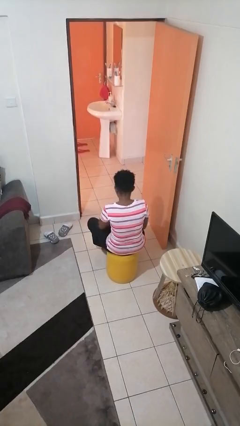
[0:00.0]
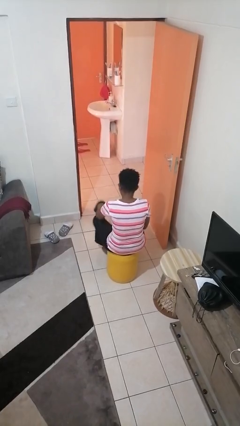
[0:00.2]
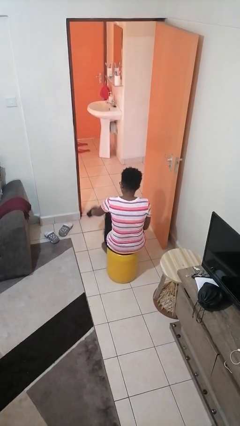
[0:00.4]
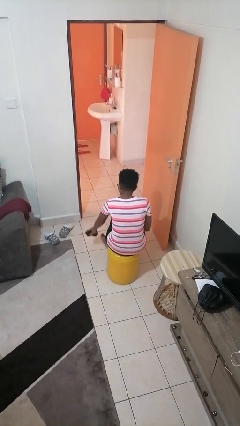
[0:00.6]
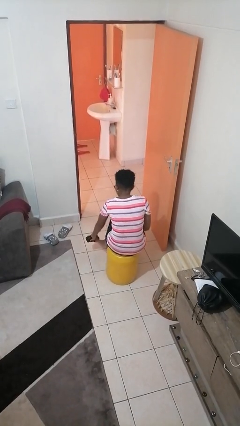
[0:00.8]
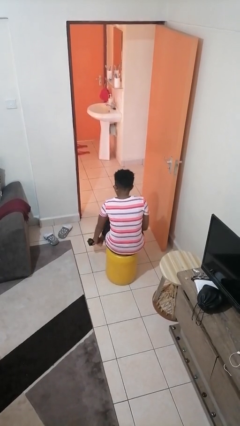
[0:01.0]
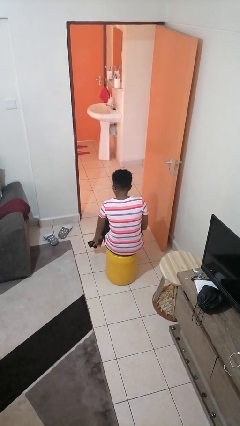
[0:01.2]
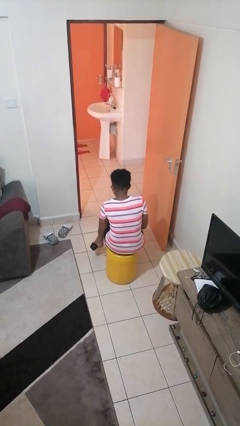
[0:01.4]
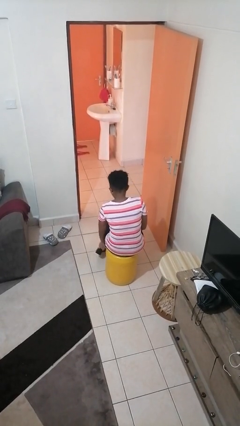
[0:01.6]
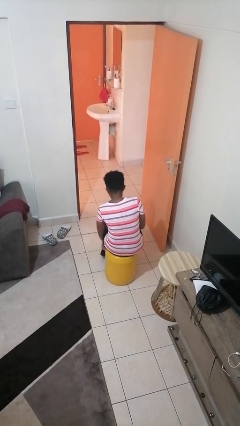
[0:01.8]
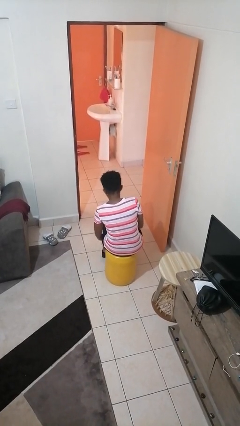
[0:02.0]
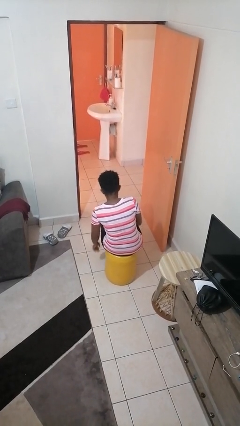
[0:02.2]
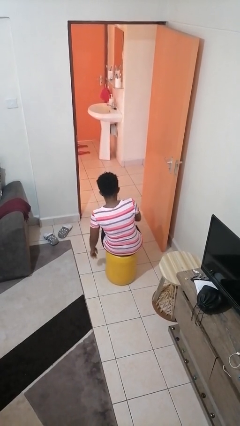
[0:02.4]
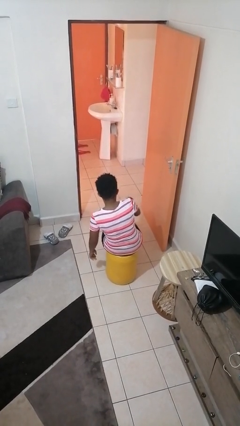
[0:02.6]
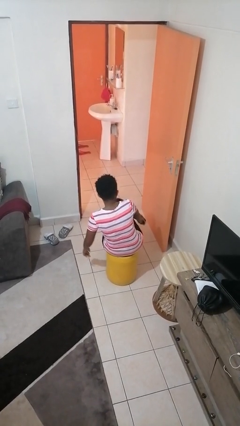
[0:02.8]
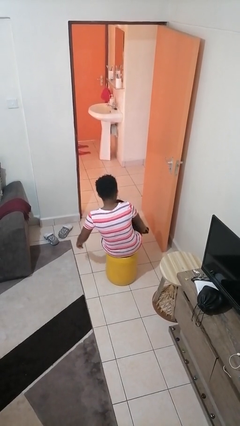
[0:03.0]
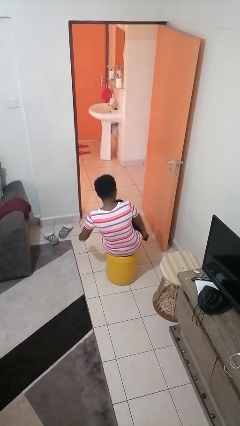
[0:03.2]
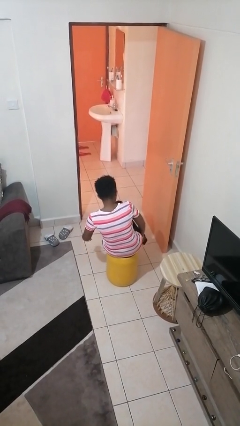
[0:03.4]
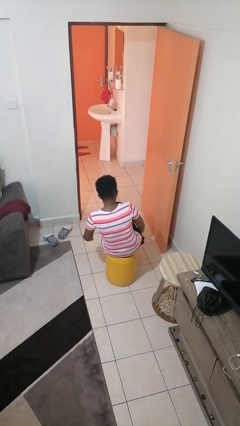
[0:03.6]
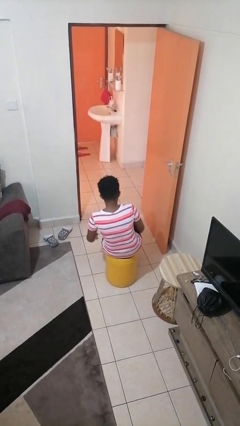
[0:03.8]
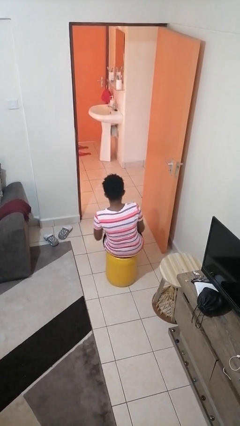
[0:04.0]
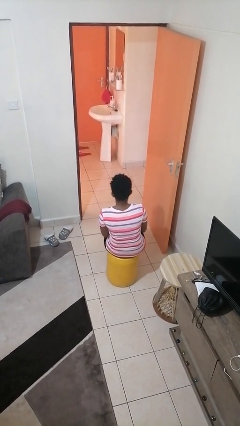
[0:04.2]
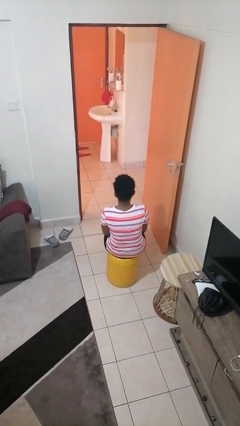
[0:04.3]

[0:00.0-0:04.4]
person puts on shoes

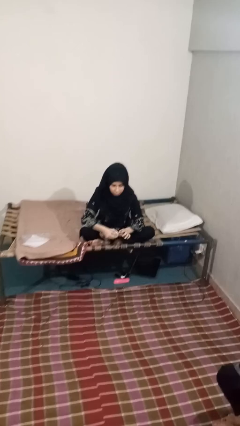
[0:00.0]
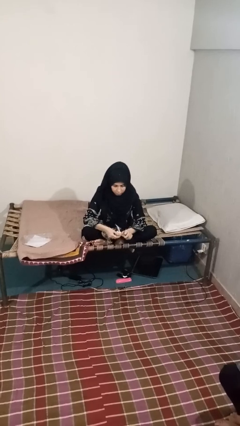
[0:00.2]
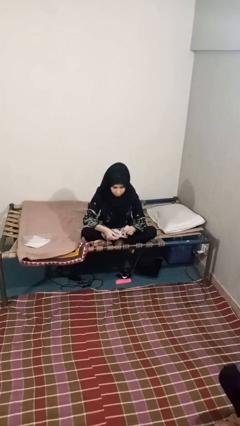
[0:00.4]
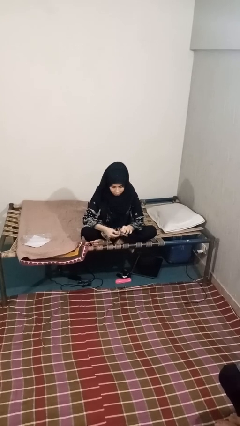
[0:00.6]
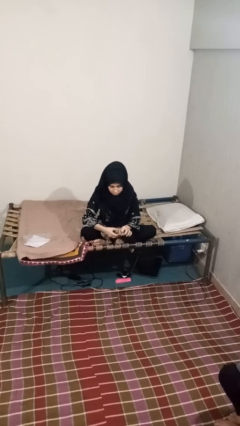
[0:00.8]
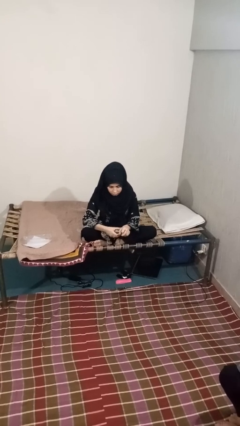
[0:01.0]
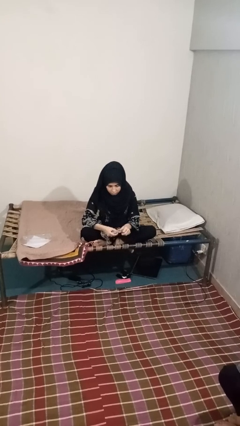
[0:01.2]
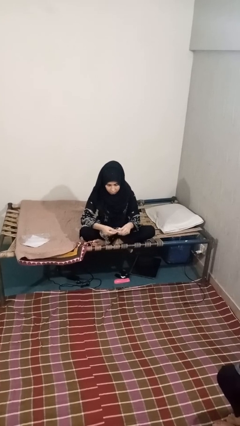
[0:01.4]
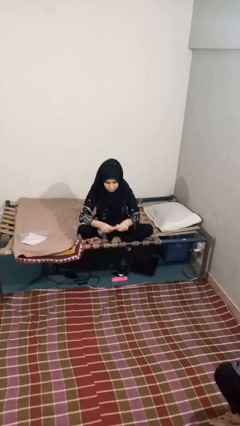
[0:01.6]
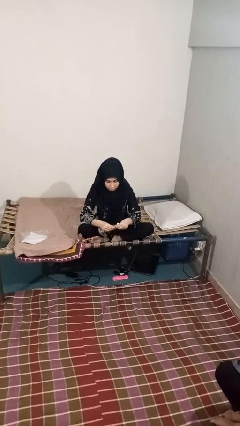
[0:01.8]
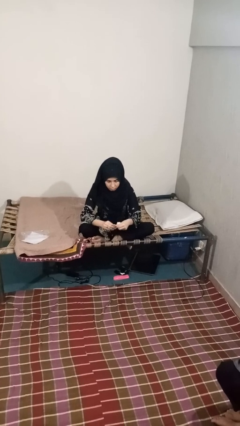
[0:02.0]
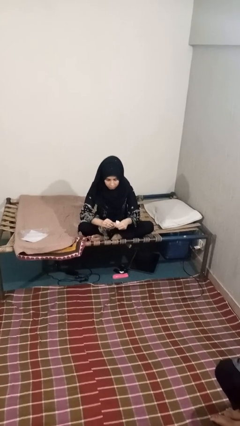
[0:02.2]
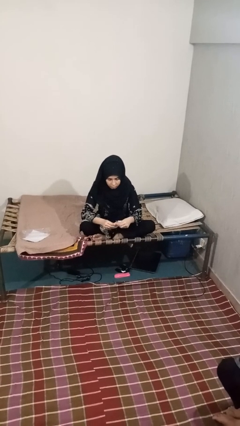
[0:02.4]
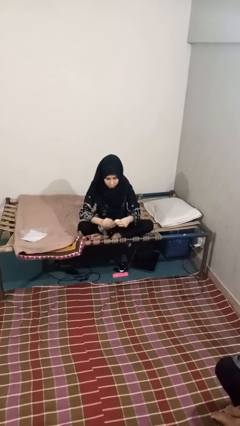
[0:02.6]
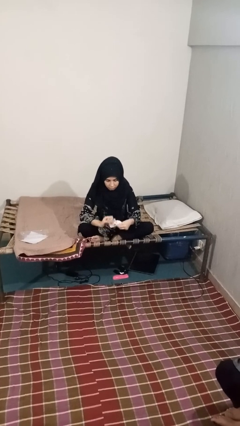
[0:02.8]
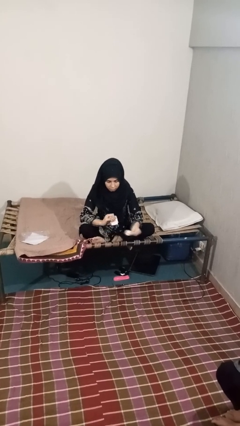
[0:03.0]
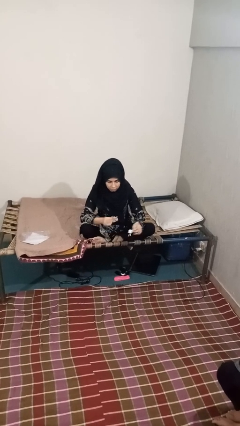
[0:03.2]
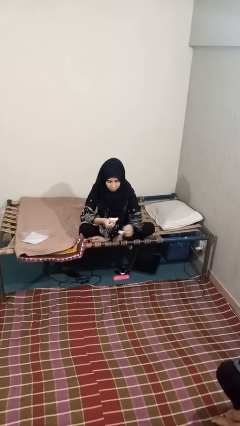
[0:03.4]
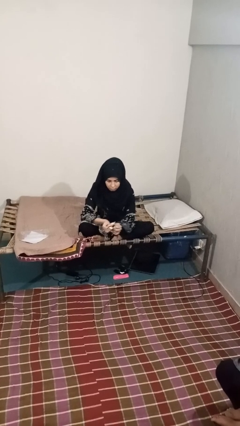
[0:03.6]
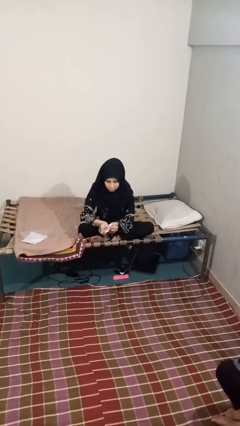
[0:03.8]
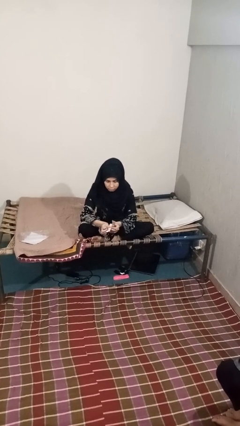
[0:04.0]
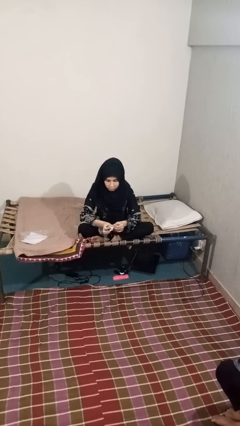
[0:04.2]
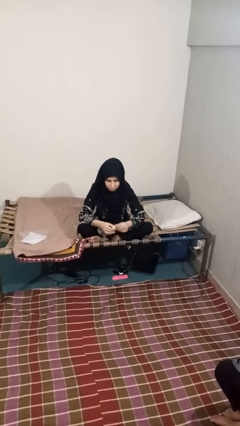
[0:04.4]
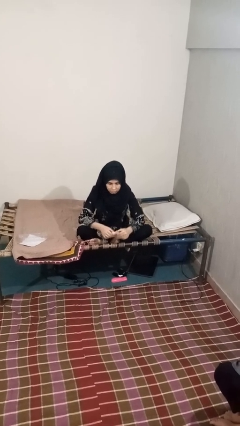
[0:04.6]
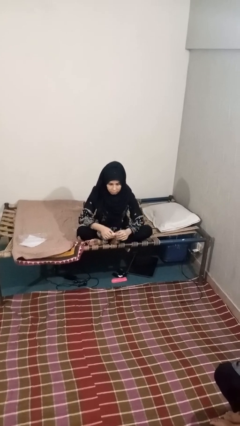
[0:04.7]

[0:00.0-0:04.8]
person tears paper

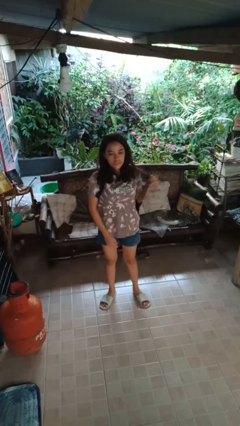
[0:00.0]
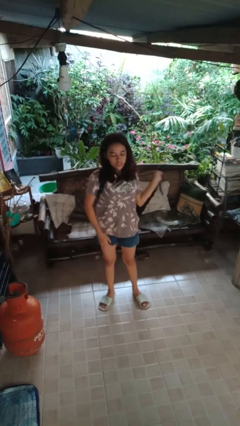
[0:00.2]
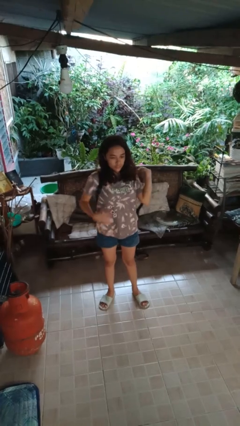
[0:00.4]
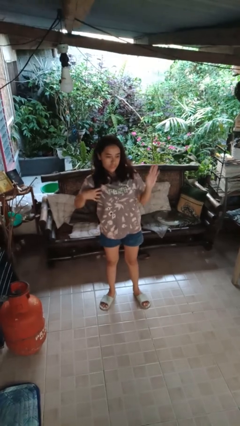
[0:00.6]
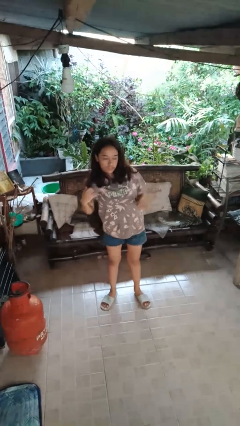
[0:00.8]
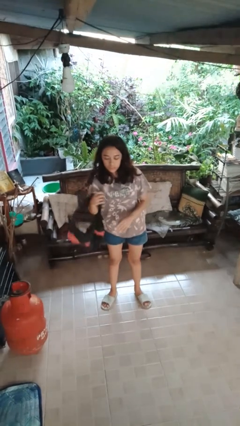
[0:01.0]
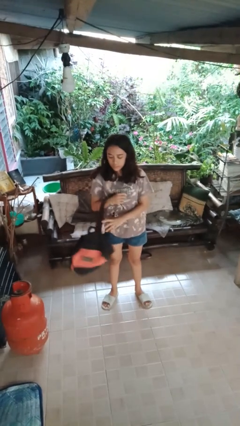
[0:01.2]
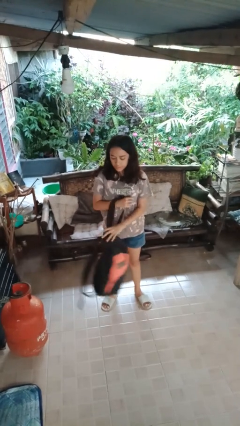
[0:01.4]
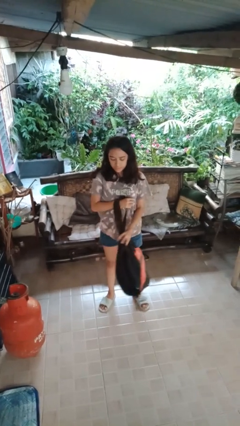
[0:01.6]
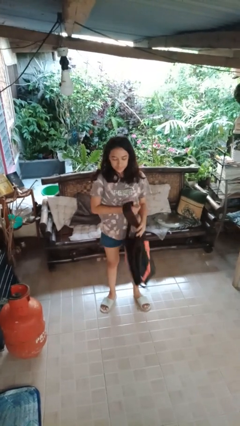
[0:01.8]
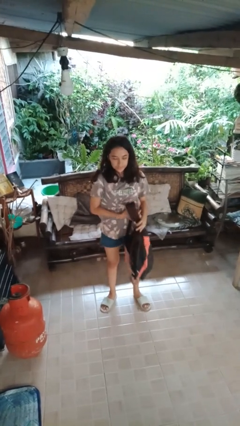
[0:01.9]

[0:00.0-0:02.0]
person takes off backpack

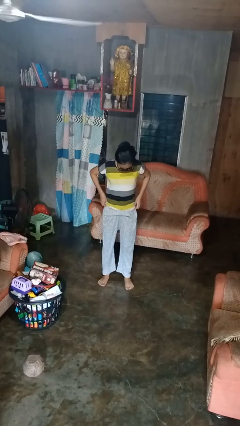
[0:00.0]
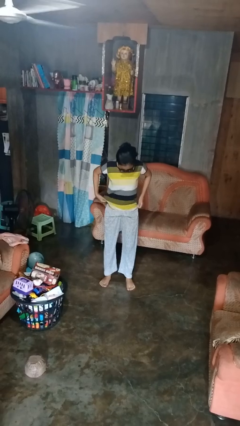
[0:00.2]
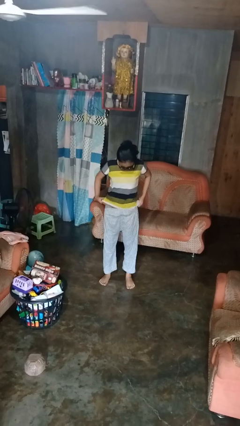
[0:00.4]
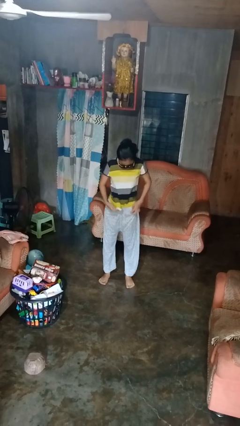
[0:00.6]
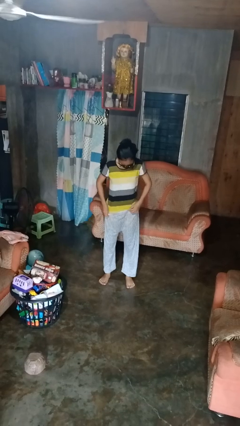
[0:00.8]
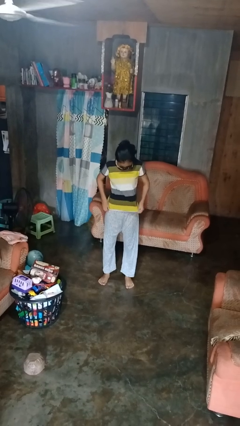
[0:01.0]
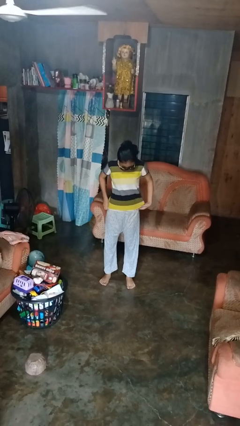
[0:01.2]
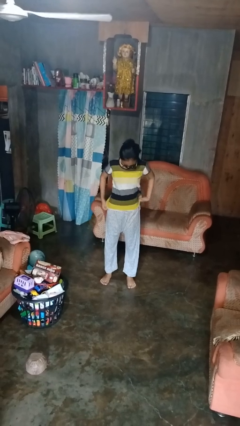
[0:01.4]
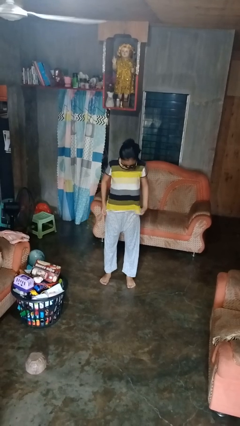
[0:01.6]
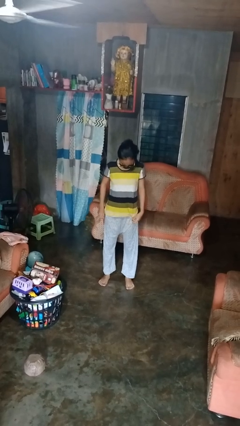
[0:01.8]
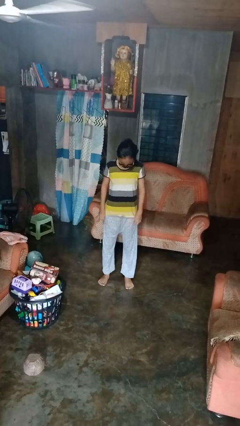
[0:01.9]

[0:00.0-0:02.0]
person untucks shirt

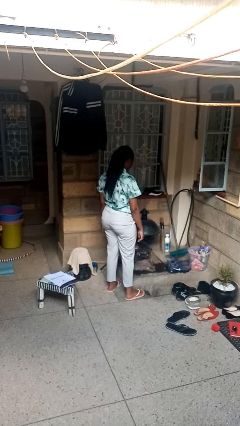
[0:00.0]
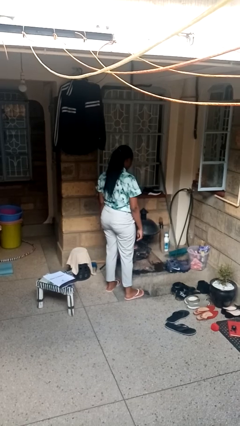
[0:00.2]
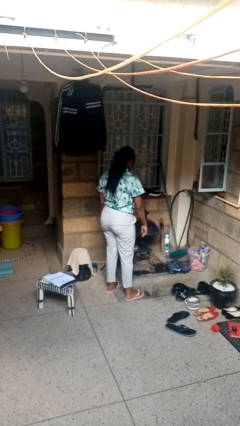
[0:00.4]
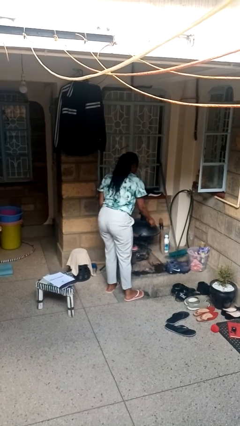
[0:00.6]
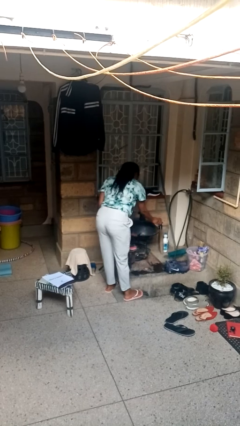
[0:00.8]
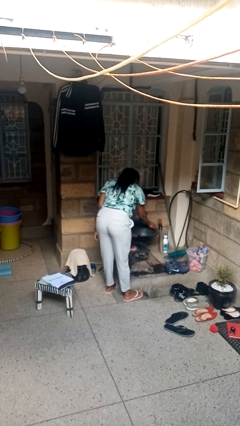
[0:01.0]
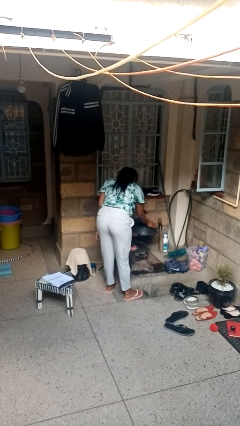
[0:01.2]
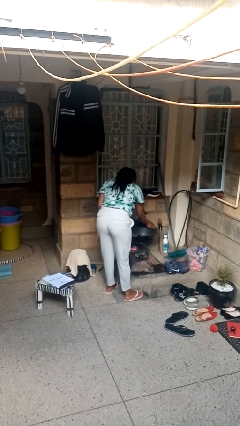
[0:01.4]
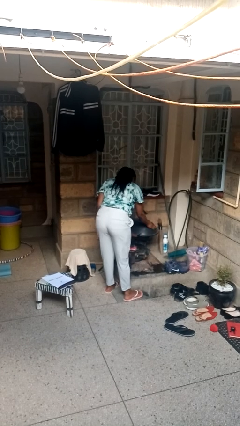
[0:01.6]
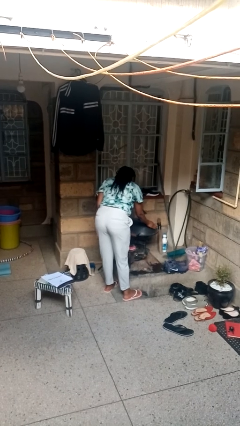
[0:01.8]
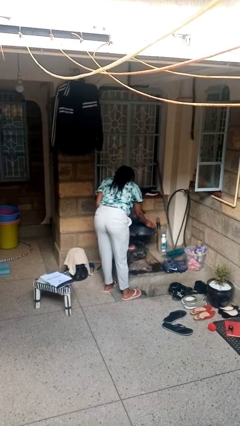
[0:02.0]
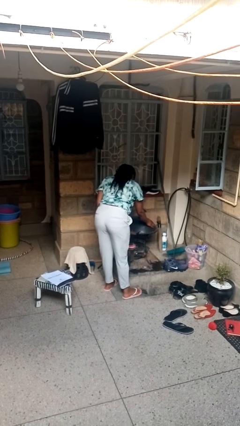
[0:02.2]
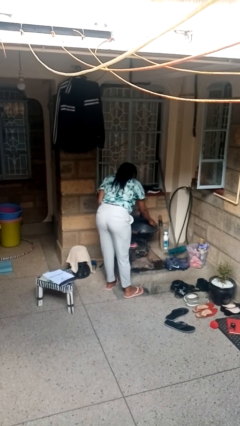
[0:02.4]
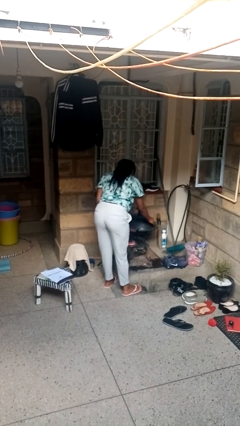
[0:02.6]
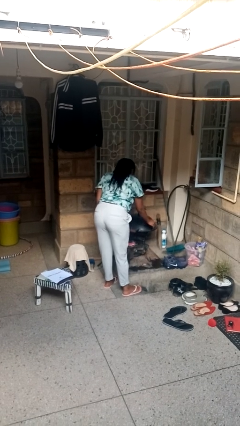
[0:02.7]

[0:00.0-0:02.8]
person taps object with finger

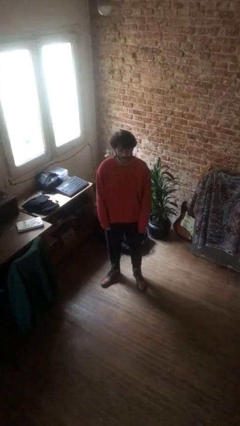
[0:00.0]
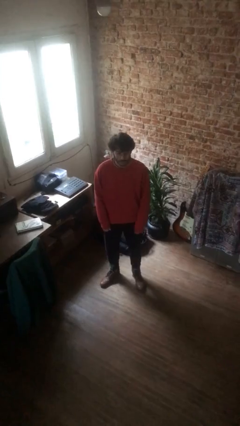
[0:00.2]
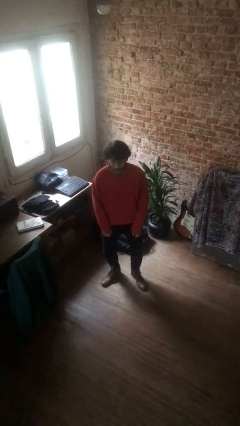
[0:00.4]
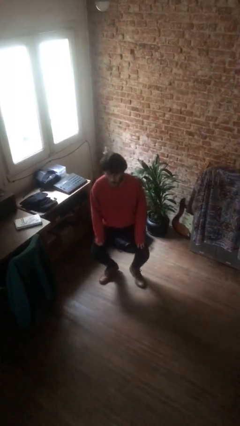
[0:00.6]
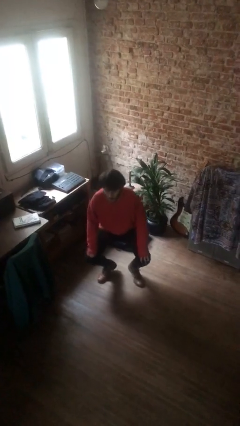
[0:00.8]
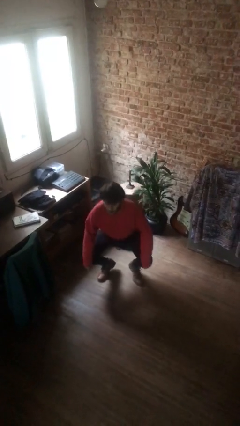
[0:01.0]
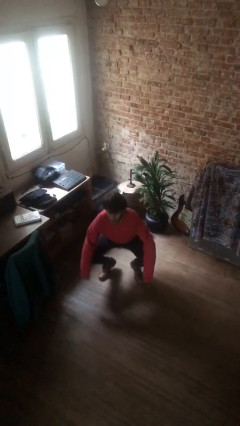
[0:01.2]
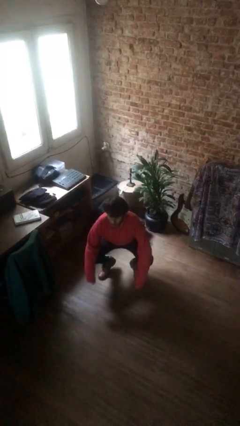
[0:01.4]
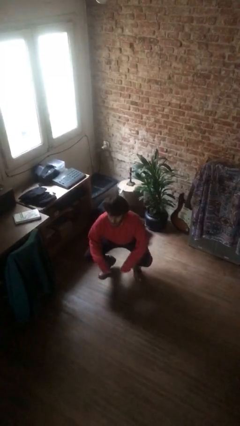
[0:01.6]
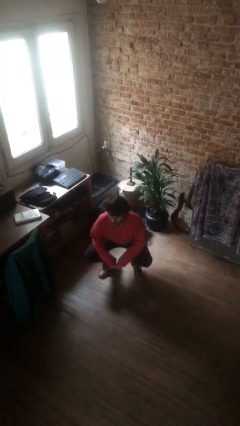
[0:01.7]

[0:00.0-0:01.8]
person squats
